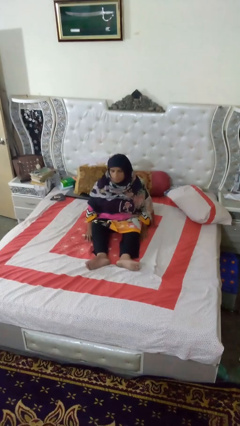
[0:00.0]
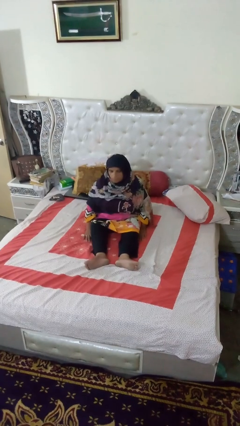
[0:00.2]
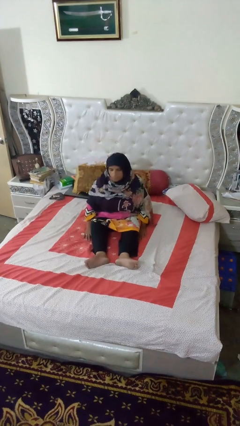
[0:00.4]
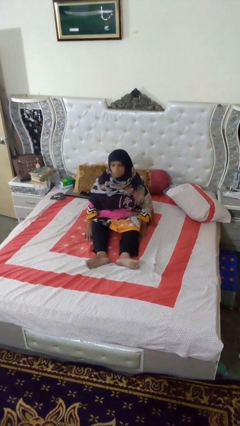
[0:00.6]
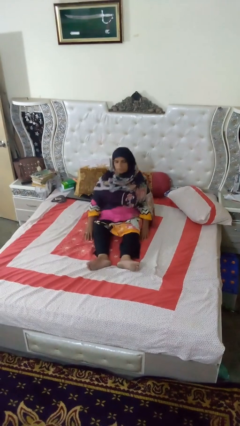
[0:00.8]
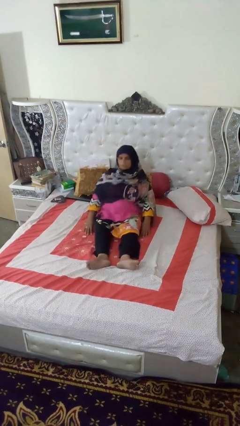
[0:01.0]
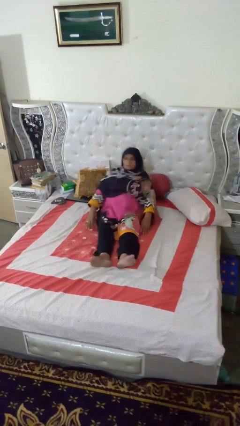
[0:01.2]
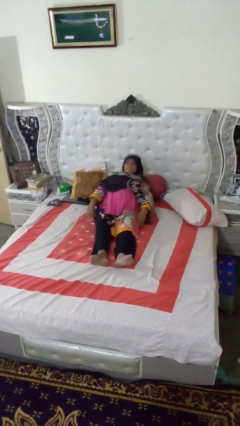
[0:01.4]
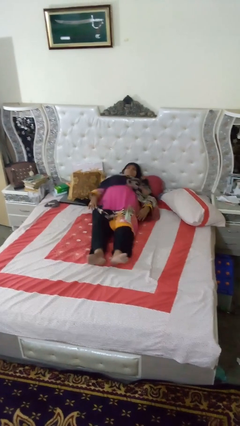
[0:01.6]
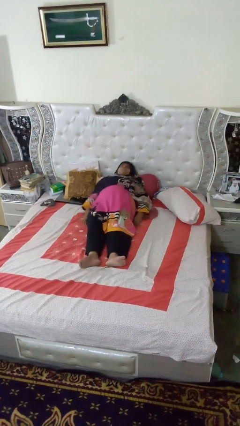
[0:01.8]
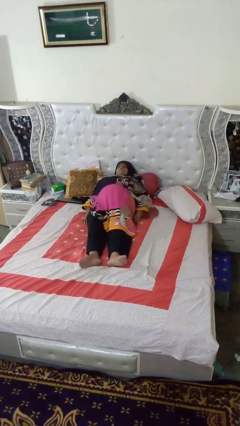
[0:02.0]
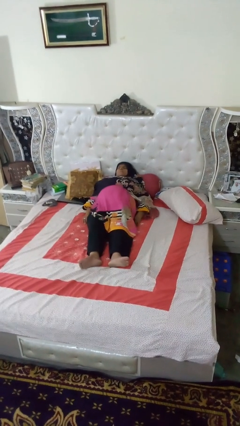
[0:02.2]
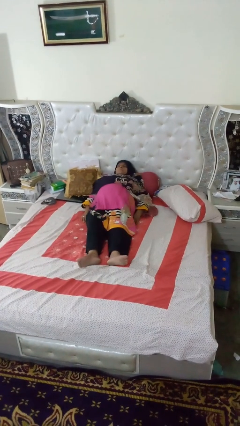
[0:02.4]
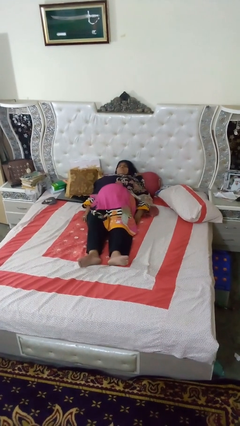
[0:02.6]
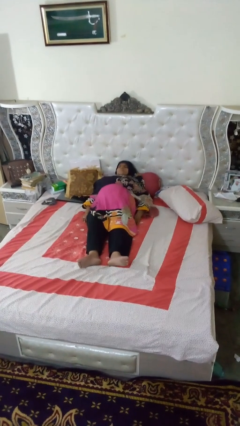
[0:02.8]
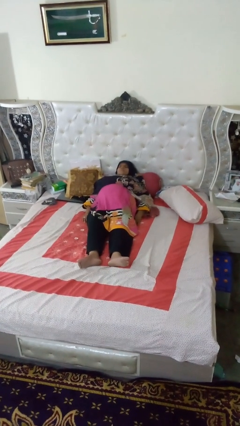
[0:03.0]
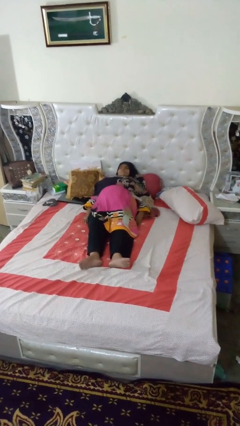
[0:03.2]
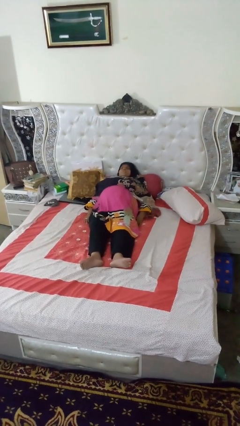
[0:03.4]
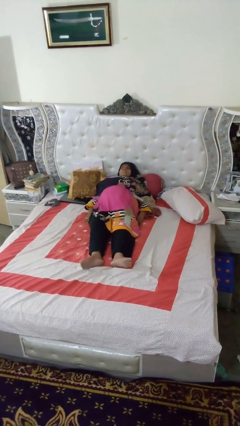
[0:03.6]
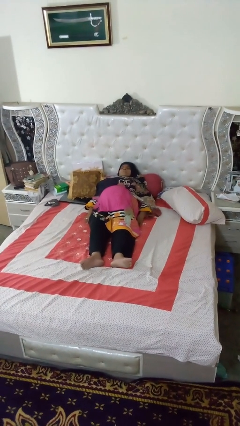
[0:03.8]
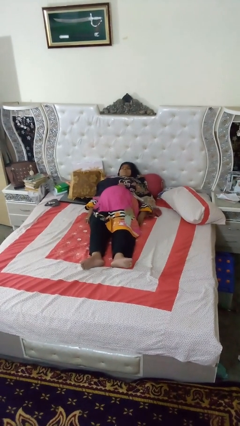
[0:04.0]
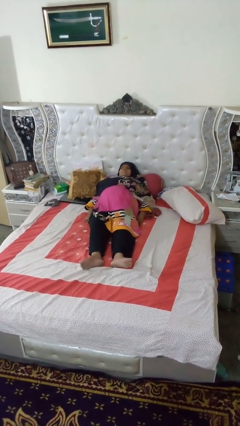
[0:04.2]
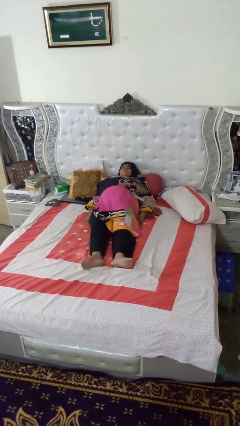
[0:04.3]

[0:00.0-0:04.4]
person lies down on bed

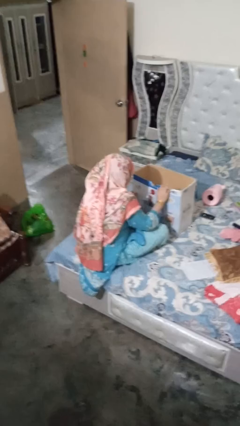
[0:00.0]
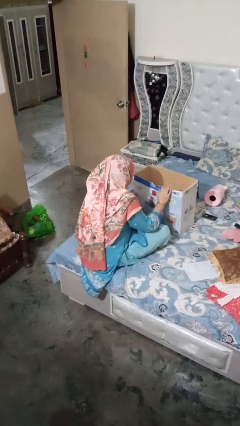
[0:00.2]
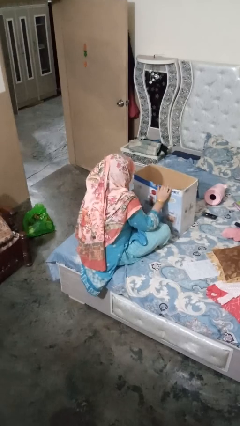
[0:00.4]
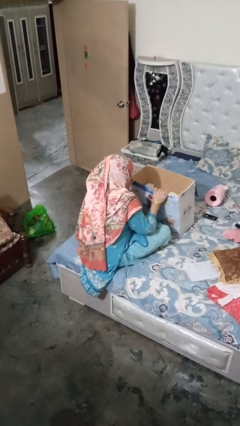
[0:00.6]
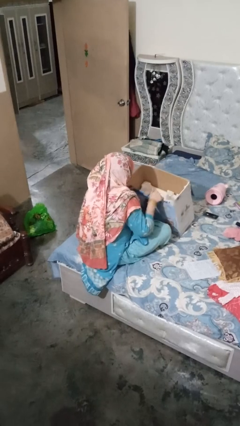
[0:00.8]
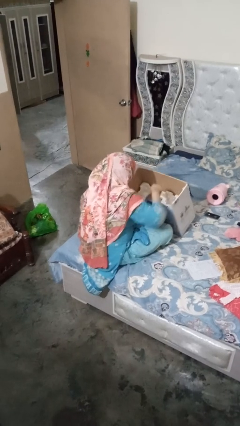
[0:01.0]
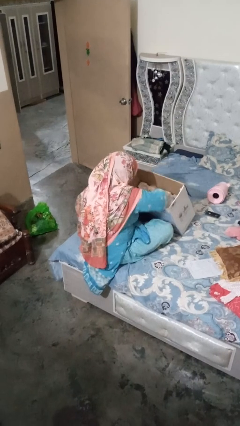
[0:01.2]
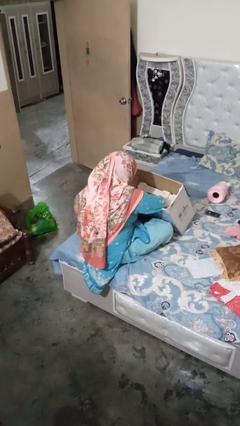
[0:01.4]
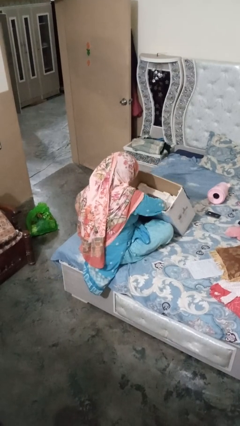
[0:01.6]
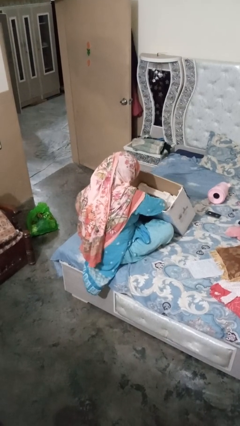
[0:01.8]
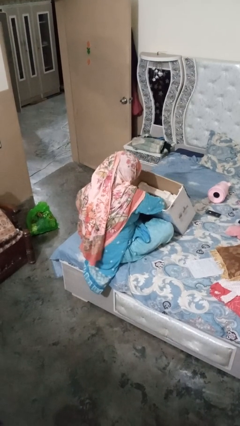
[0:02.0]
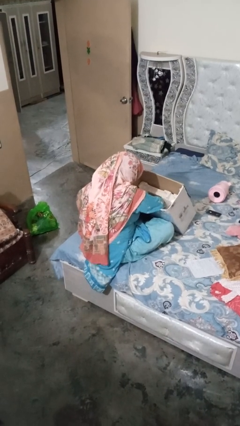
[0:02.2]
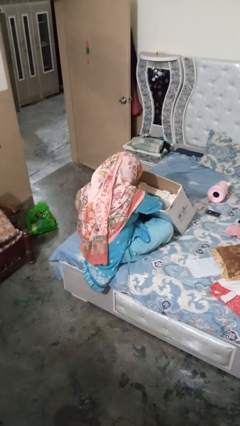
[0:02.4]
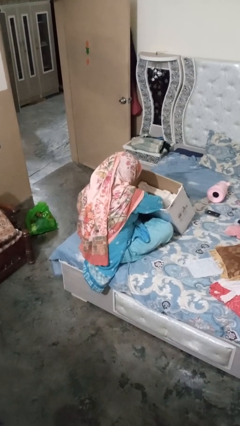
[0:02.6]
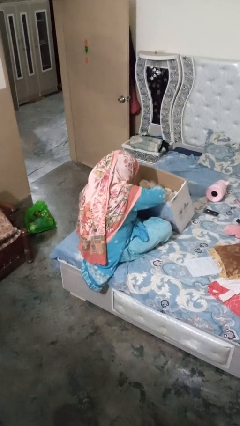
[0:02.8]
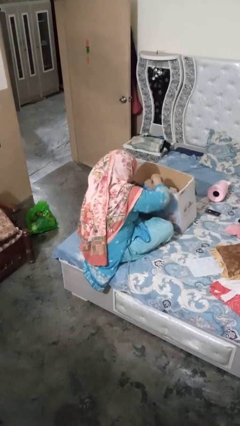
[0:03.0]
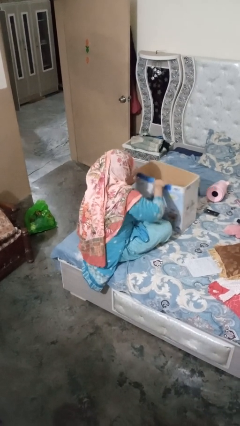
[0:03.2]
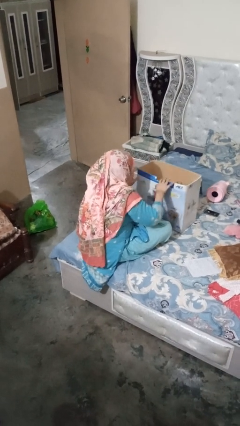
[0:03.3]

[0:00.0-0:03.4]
person searches in box

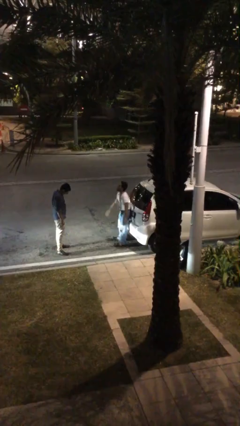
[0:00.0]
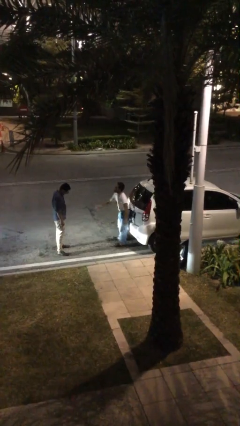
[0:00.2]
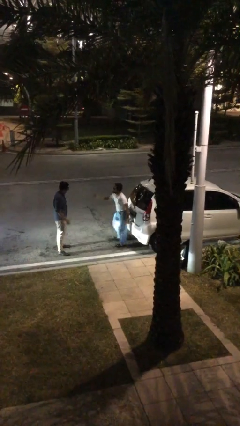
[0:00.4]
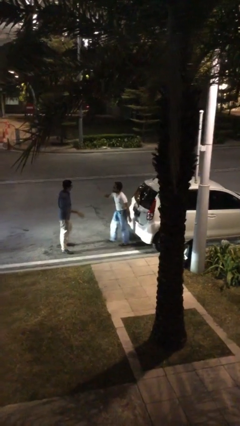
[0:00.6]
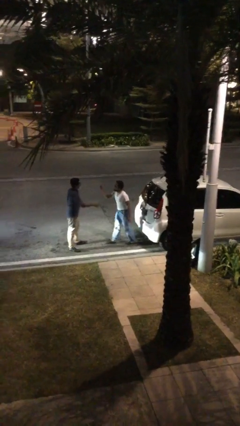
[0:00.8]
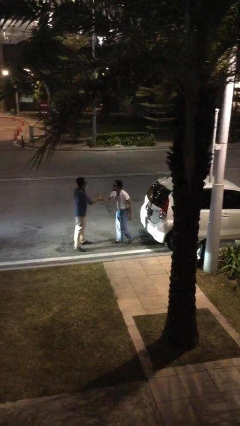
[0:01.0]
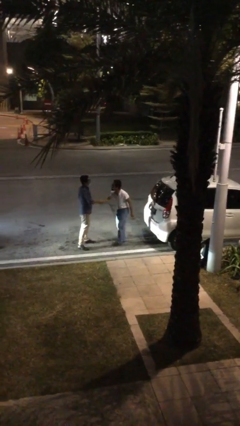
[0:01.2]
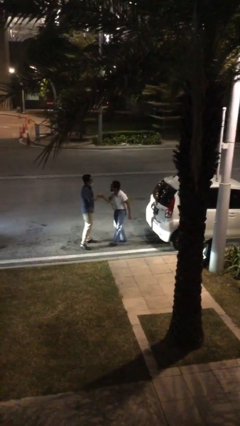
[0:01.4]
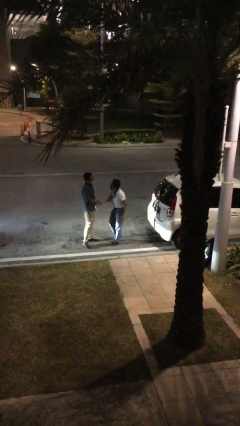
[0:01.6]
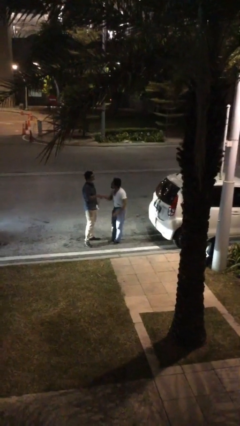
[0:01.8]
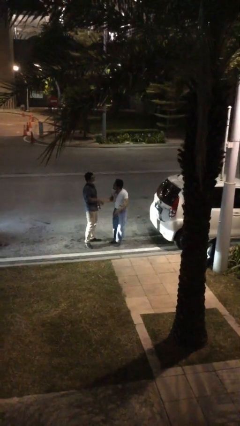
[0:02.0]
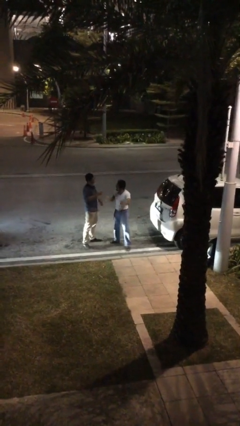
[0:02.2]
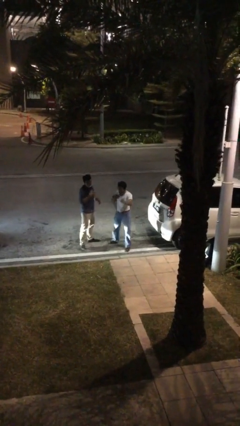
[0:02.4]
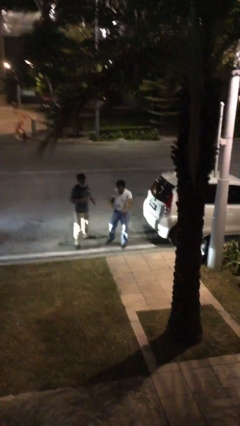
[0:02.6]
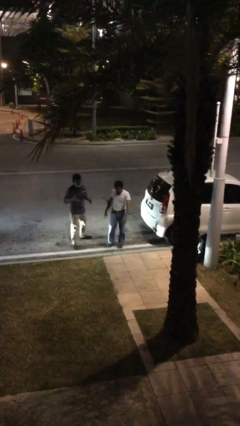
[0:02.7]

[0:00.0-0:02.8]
person shakes hand

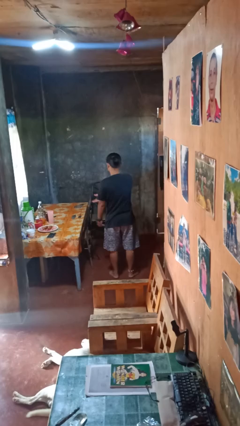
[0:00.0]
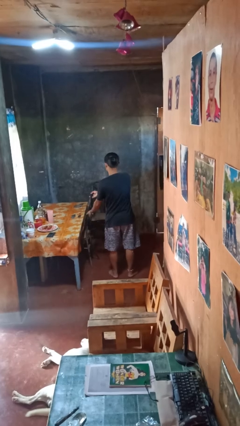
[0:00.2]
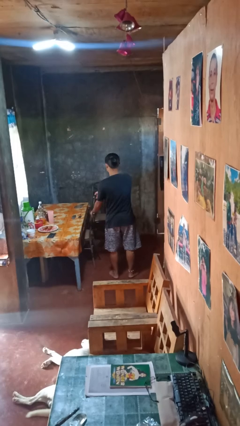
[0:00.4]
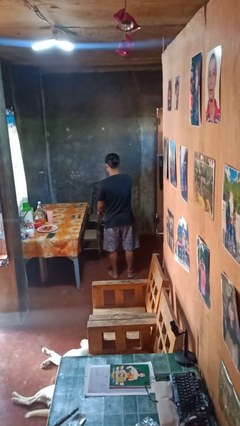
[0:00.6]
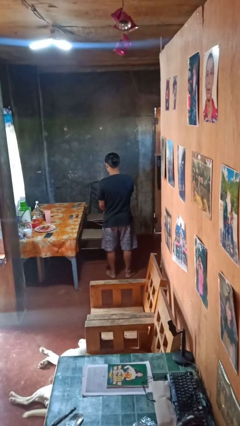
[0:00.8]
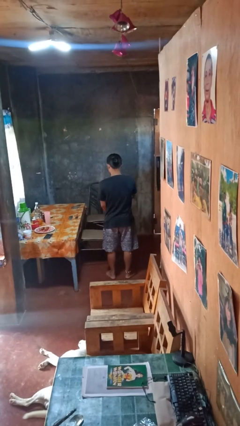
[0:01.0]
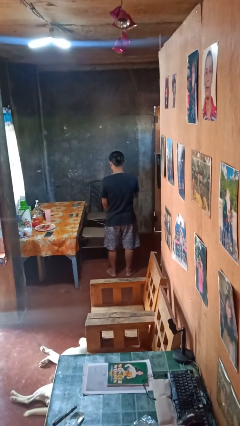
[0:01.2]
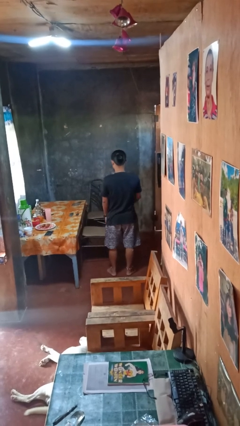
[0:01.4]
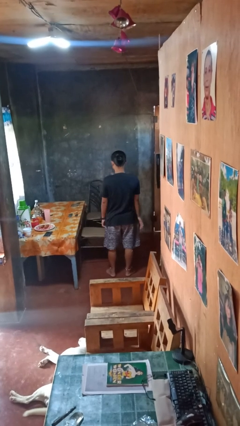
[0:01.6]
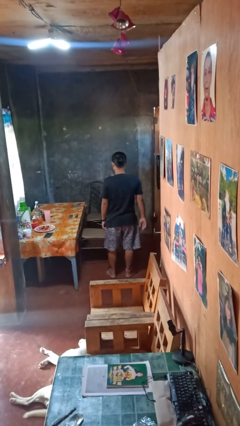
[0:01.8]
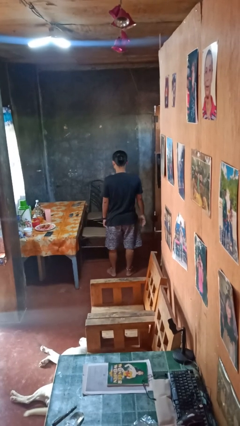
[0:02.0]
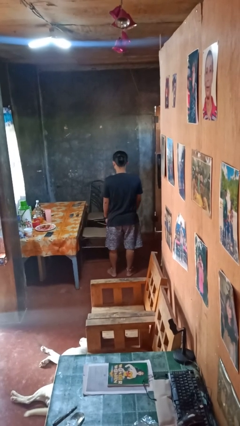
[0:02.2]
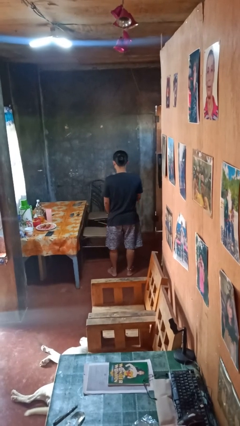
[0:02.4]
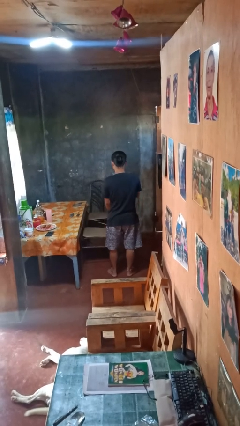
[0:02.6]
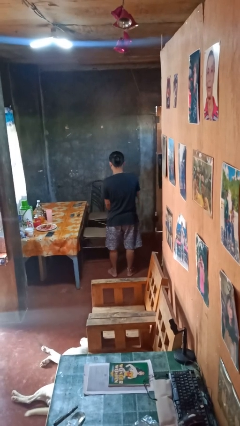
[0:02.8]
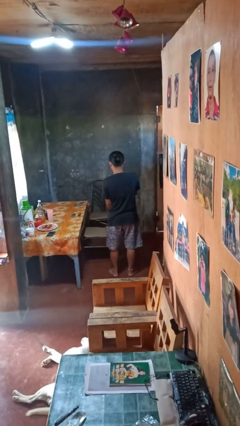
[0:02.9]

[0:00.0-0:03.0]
person pulls out chair

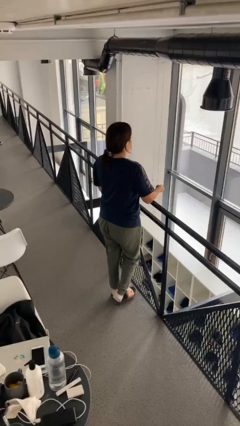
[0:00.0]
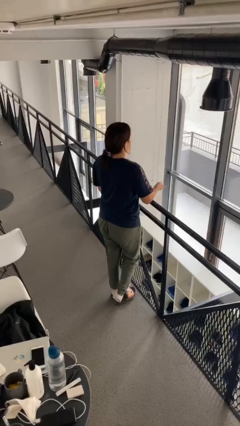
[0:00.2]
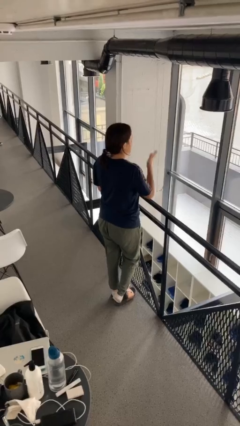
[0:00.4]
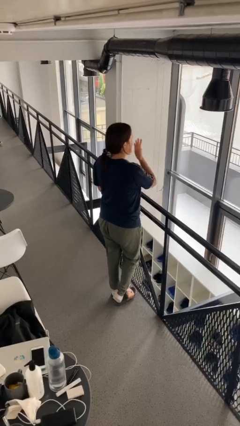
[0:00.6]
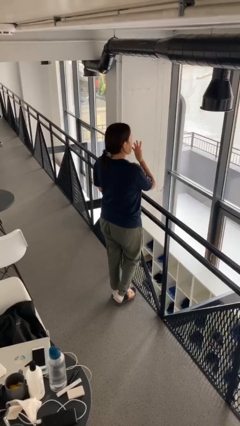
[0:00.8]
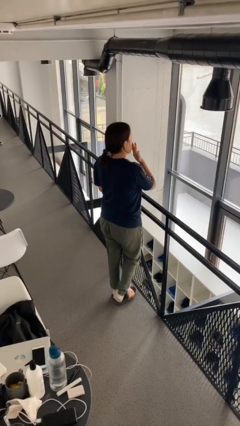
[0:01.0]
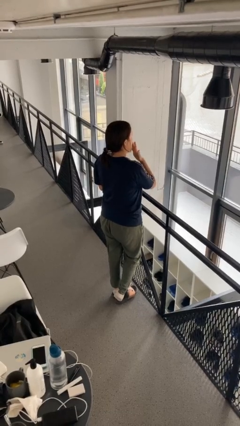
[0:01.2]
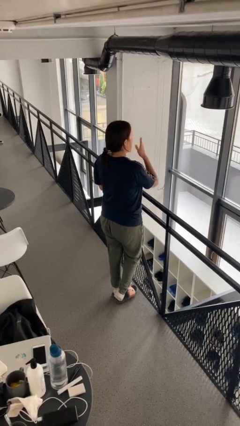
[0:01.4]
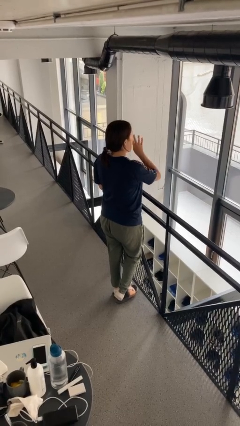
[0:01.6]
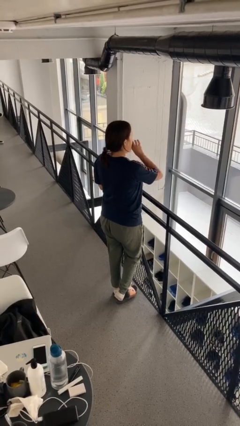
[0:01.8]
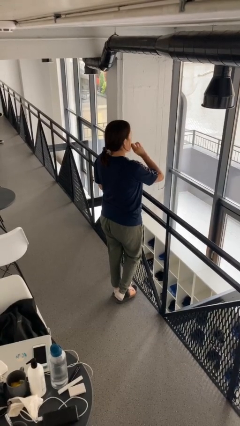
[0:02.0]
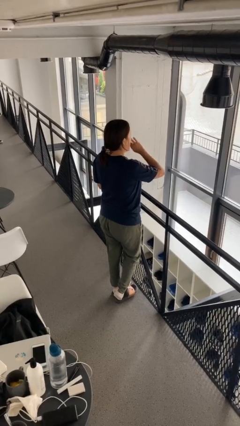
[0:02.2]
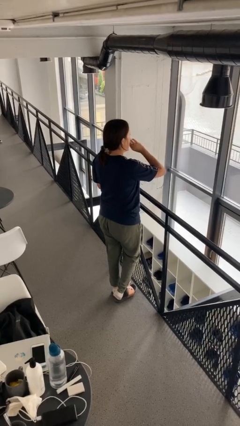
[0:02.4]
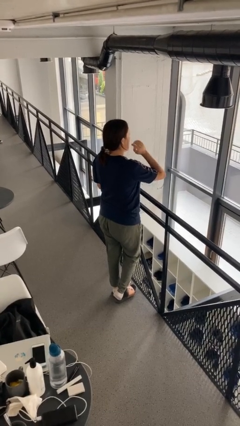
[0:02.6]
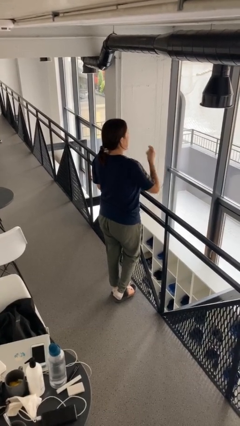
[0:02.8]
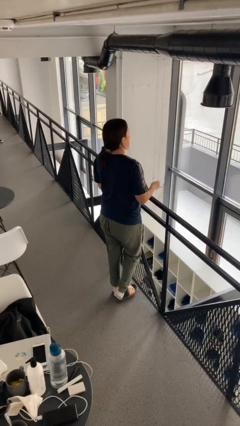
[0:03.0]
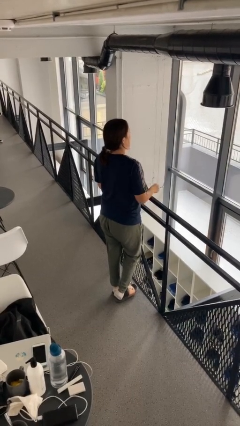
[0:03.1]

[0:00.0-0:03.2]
person licks fingers

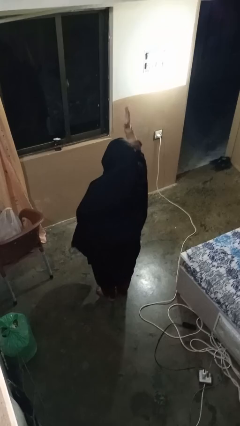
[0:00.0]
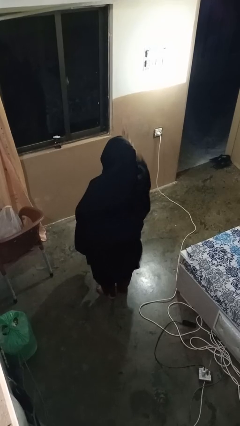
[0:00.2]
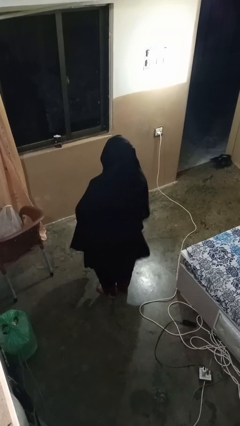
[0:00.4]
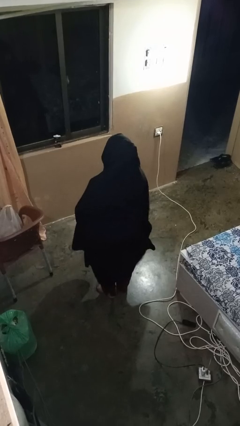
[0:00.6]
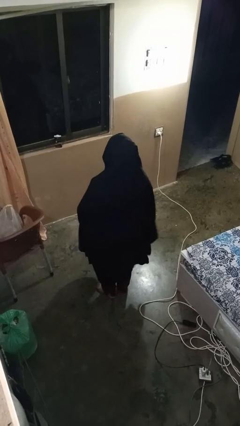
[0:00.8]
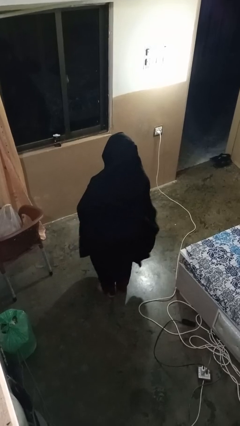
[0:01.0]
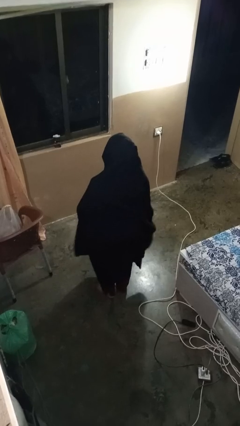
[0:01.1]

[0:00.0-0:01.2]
person gestures lower hand
